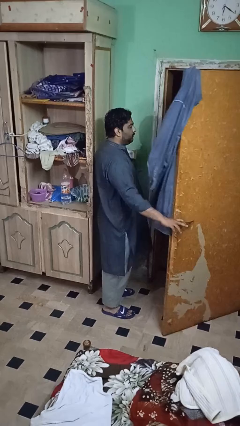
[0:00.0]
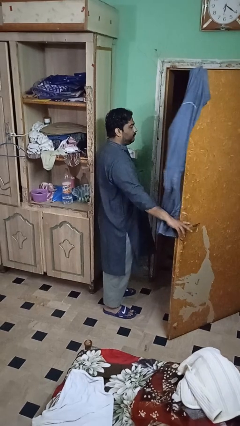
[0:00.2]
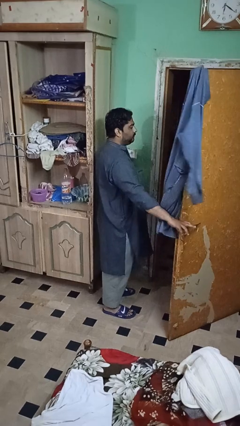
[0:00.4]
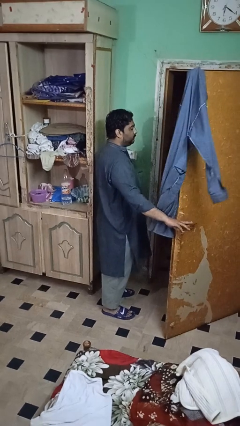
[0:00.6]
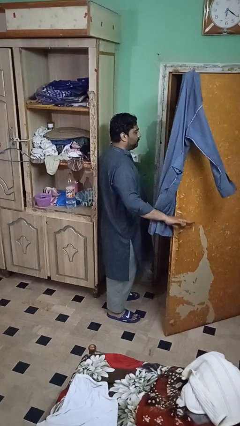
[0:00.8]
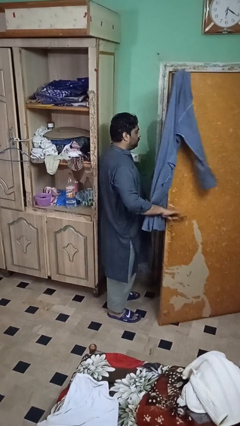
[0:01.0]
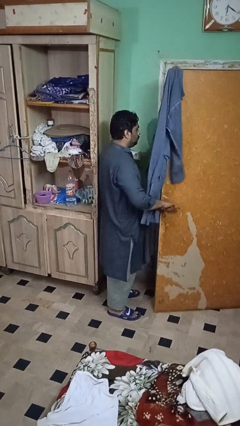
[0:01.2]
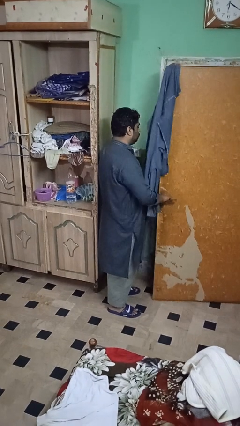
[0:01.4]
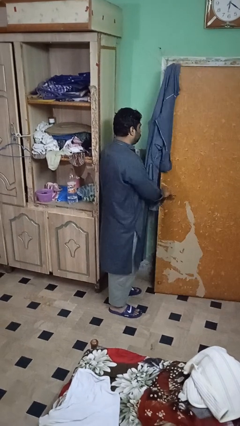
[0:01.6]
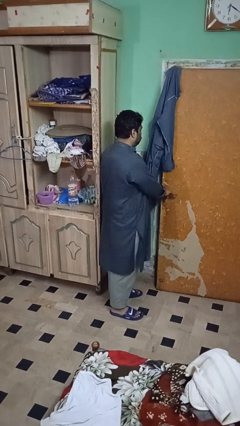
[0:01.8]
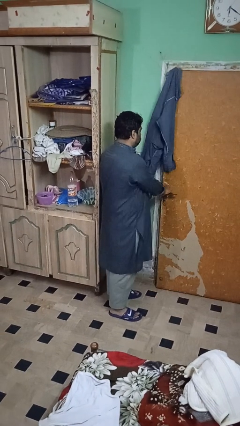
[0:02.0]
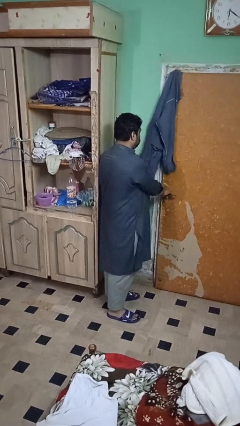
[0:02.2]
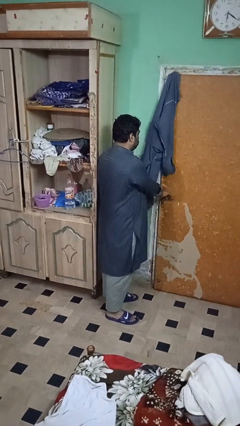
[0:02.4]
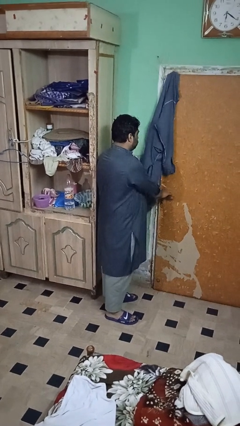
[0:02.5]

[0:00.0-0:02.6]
person closes closet door

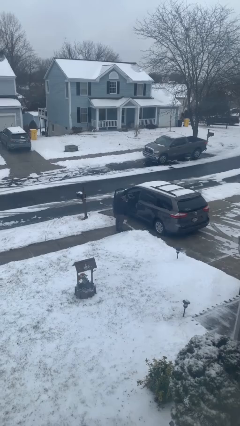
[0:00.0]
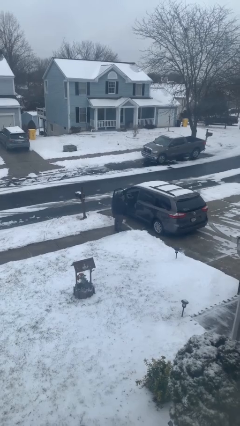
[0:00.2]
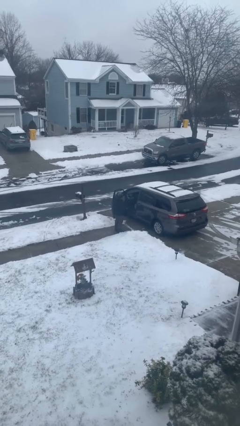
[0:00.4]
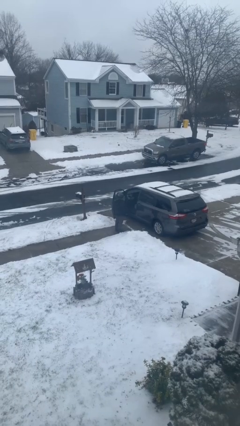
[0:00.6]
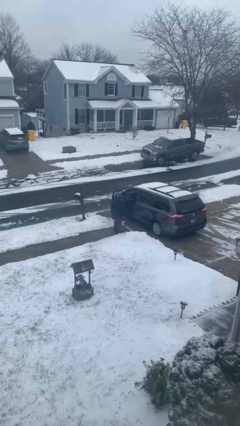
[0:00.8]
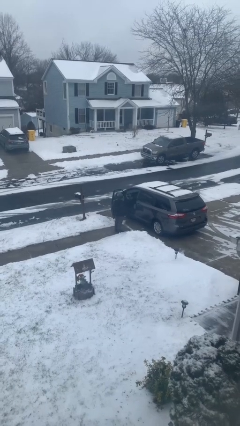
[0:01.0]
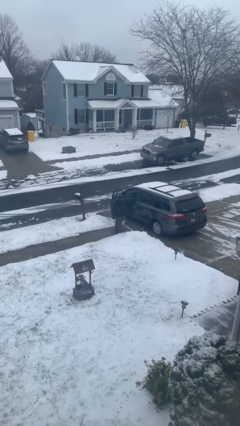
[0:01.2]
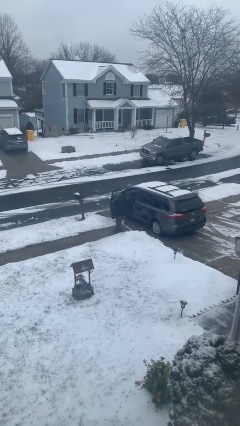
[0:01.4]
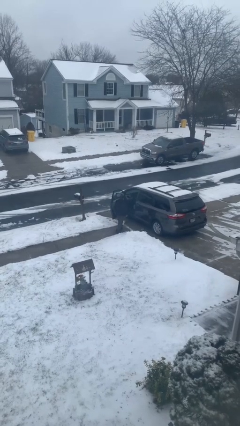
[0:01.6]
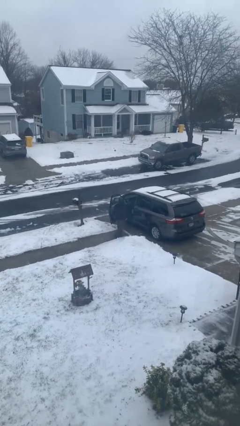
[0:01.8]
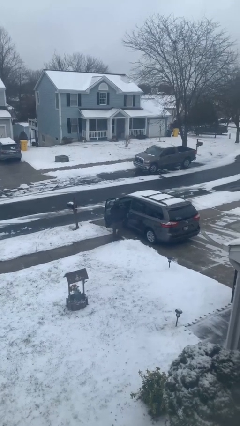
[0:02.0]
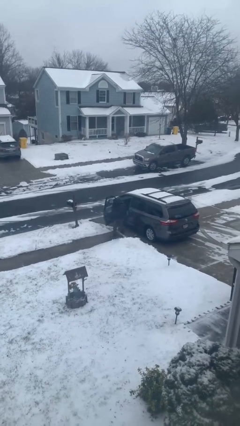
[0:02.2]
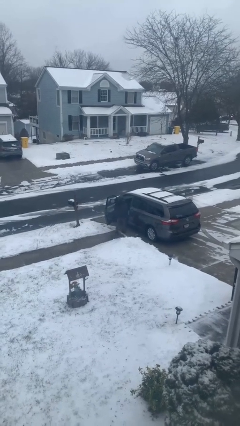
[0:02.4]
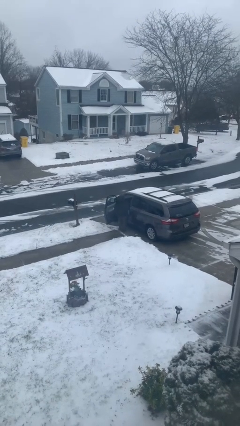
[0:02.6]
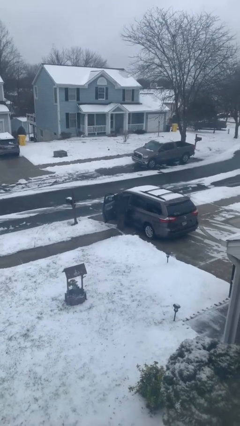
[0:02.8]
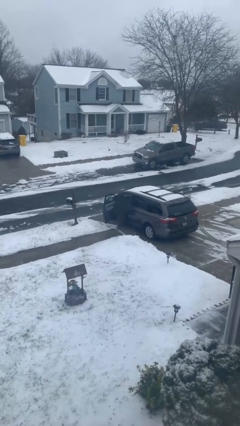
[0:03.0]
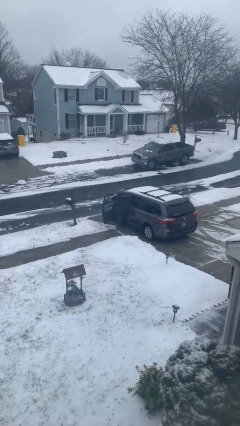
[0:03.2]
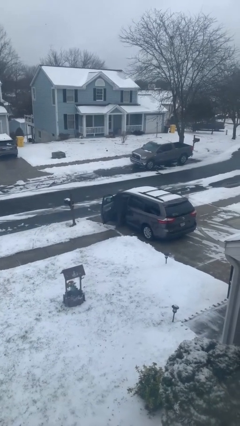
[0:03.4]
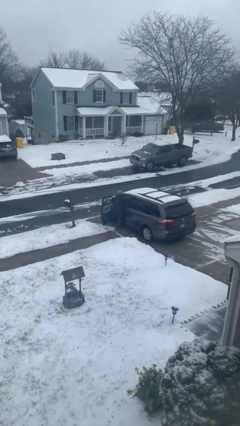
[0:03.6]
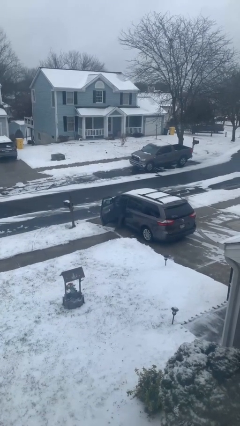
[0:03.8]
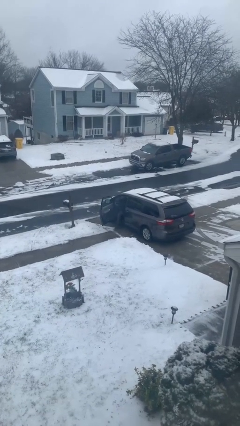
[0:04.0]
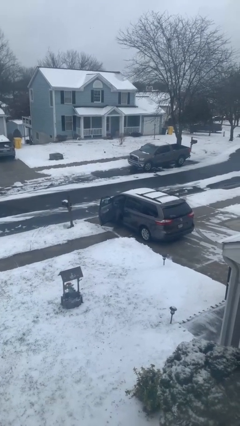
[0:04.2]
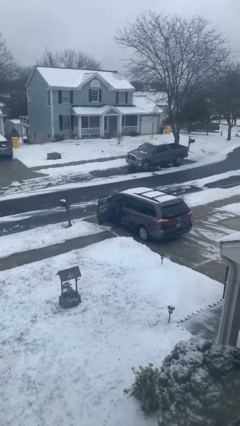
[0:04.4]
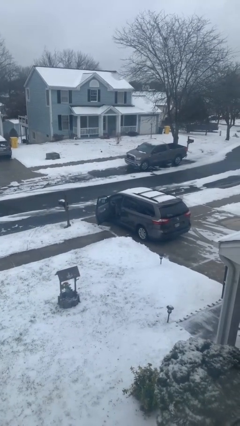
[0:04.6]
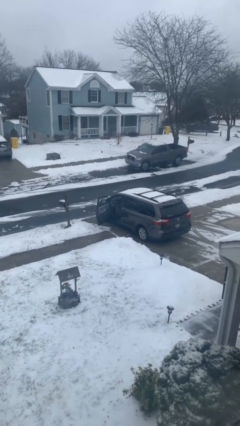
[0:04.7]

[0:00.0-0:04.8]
person enters car

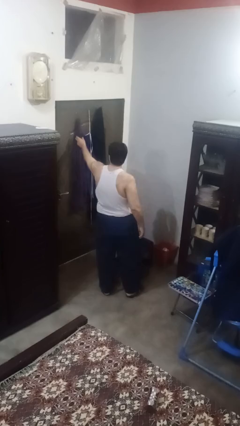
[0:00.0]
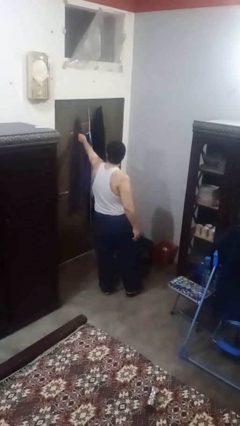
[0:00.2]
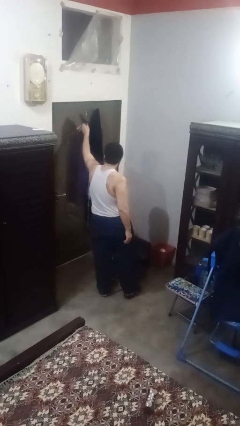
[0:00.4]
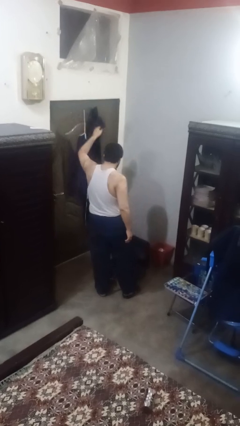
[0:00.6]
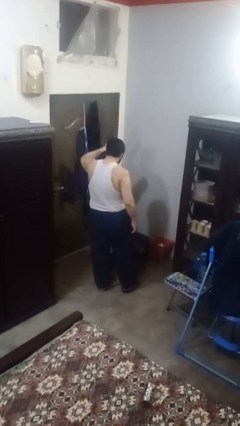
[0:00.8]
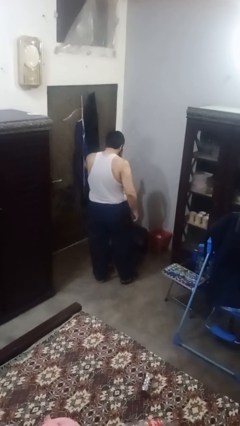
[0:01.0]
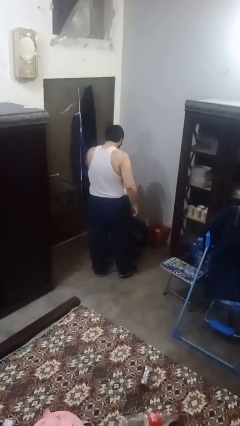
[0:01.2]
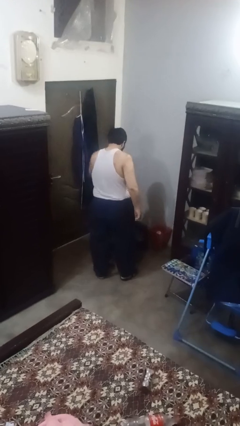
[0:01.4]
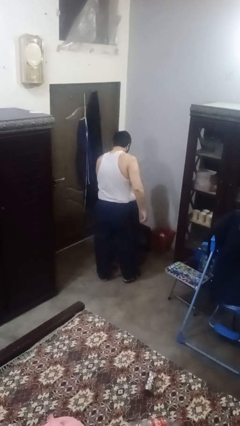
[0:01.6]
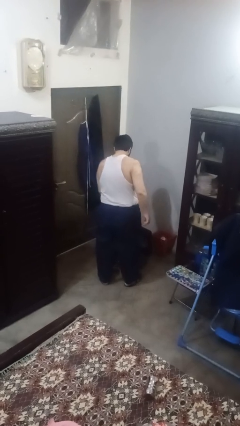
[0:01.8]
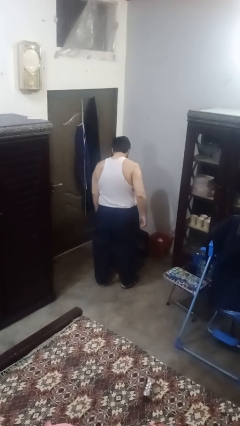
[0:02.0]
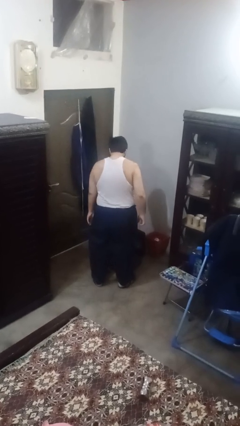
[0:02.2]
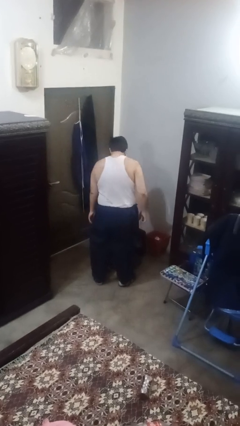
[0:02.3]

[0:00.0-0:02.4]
person loads clothes into suitcase

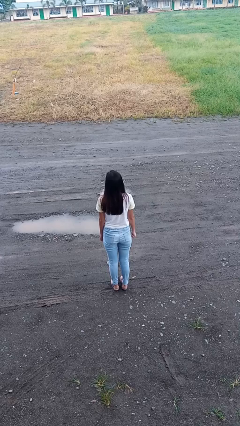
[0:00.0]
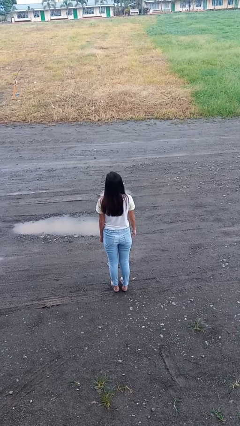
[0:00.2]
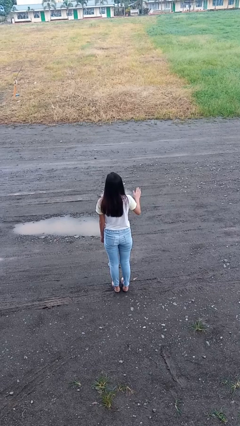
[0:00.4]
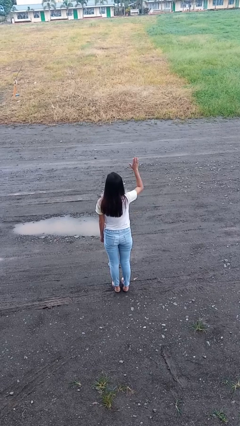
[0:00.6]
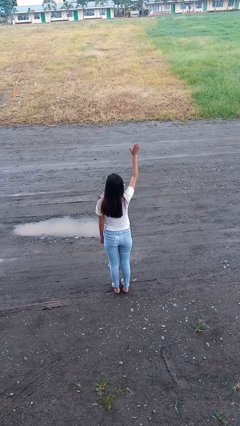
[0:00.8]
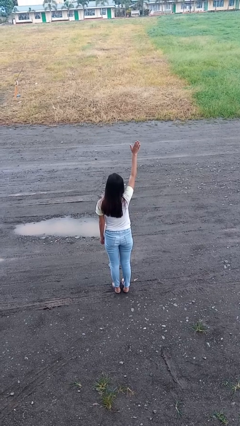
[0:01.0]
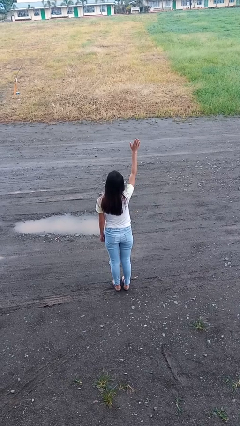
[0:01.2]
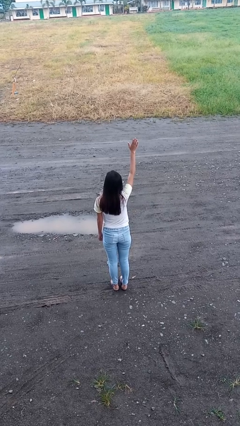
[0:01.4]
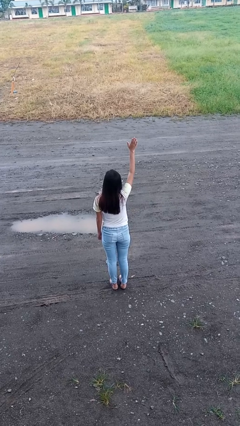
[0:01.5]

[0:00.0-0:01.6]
person gestures raise hand

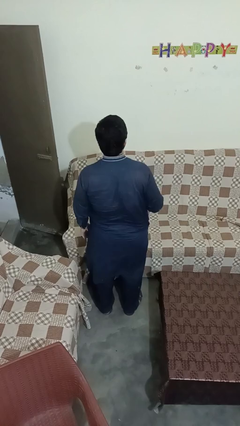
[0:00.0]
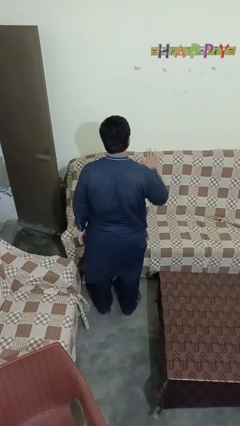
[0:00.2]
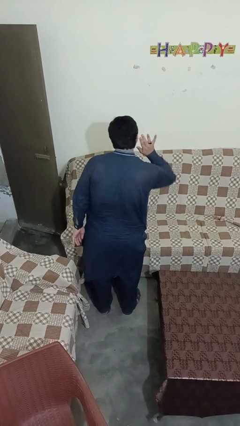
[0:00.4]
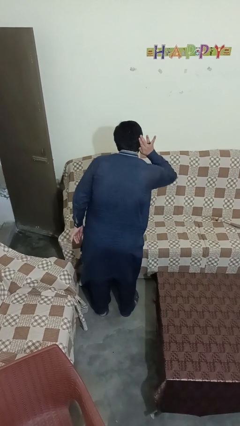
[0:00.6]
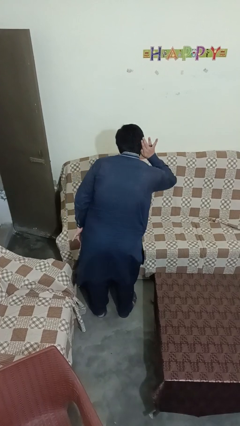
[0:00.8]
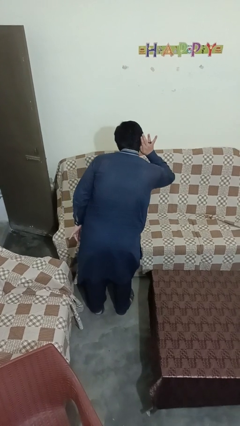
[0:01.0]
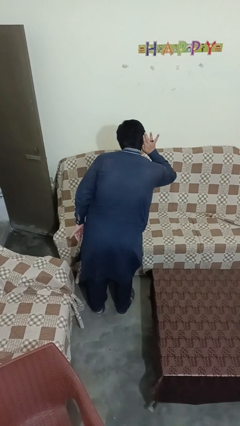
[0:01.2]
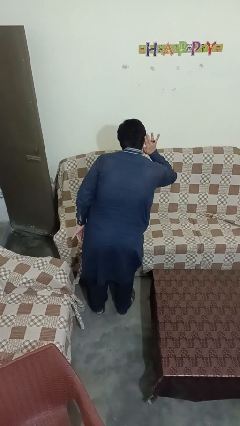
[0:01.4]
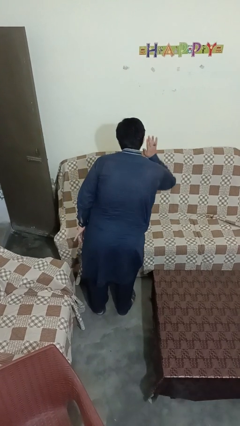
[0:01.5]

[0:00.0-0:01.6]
person gestures listen closely

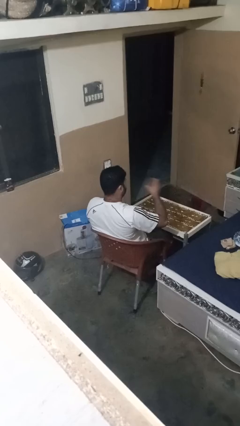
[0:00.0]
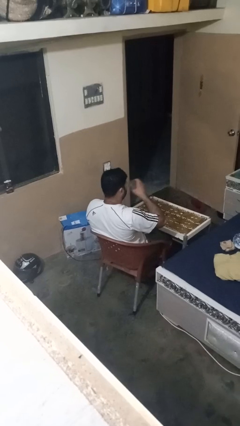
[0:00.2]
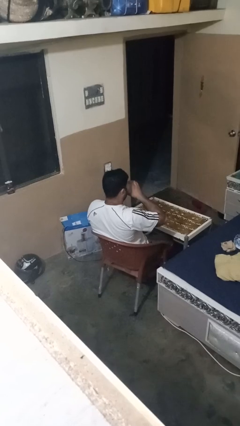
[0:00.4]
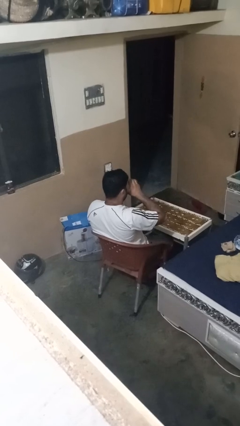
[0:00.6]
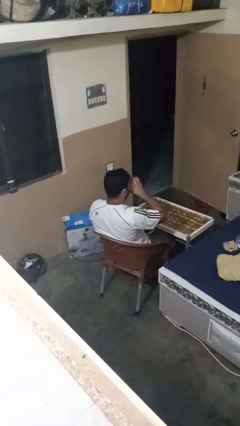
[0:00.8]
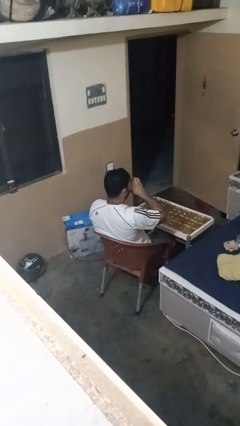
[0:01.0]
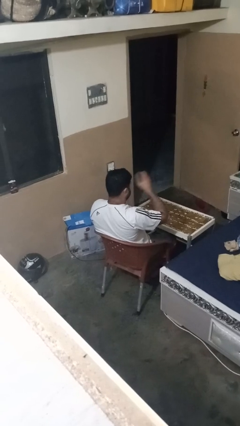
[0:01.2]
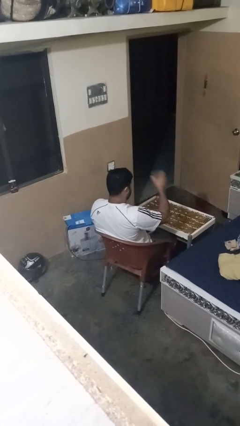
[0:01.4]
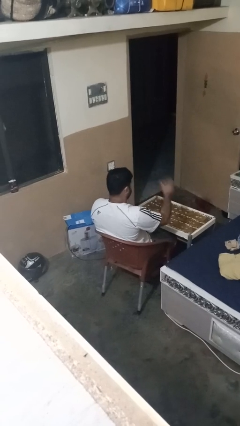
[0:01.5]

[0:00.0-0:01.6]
person drinks from shotglass

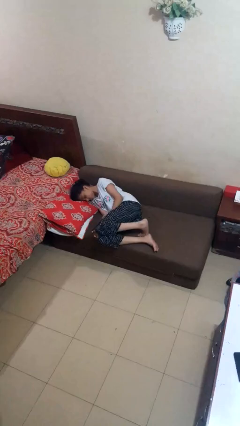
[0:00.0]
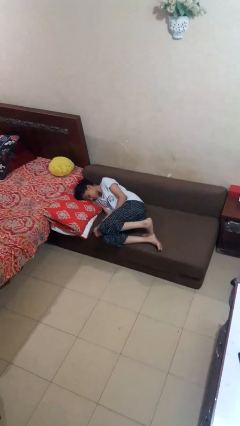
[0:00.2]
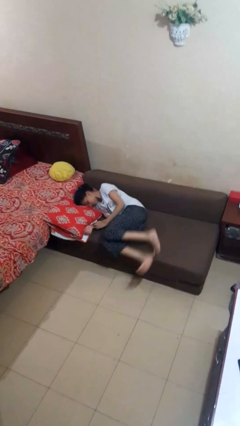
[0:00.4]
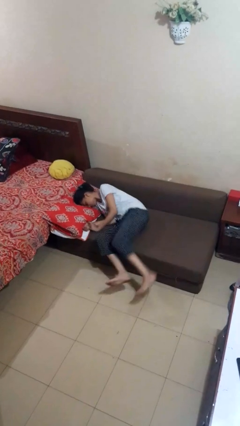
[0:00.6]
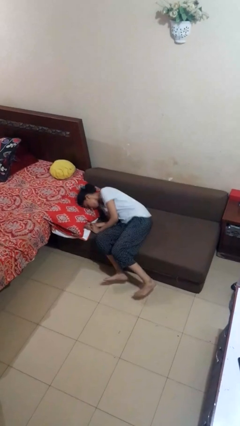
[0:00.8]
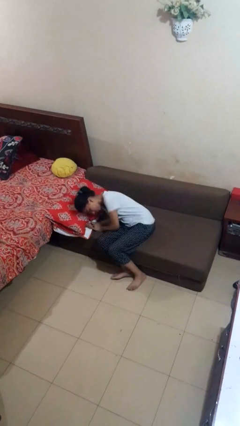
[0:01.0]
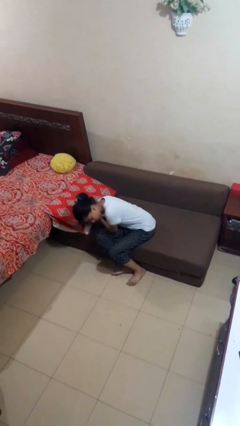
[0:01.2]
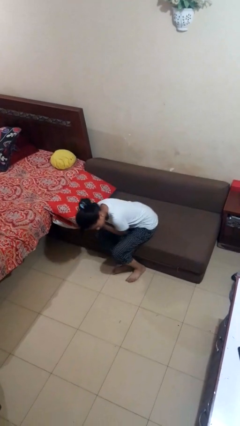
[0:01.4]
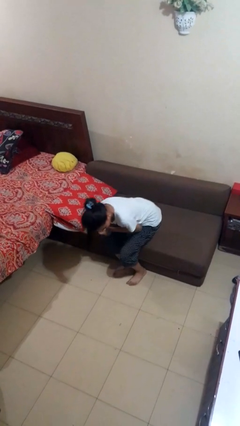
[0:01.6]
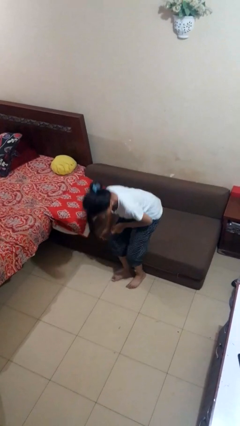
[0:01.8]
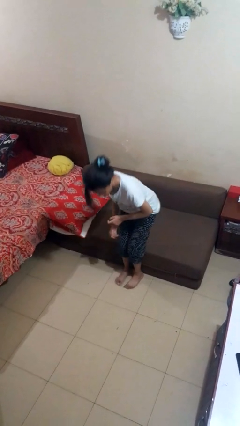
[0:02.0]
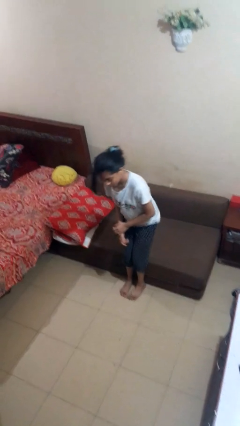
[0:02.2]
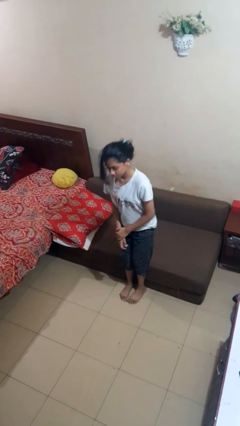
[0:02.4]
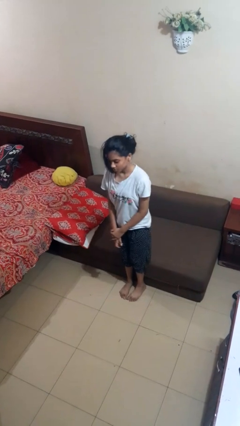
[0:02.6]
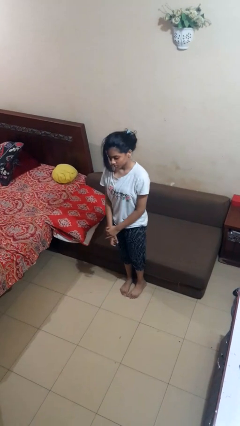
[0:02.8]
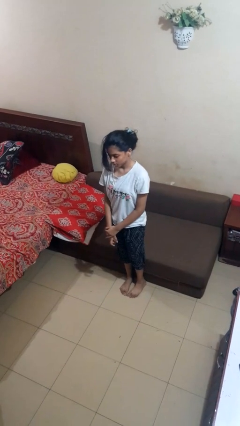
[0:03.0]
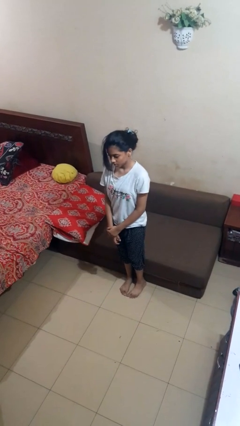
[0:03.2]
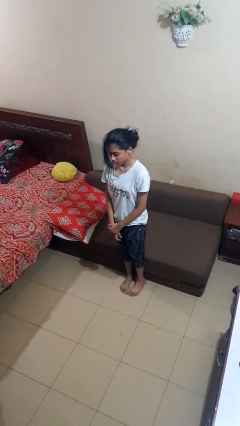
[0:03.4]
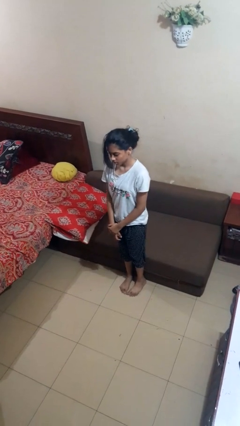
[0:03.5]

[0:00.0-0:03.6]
person stands up
